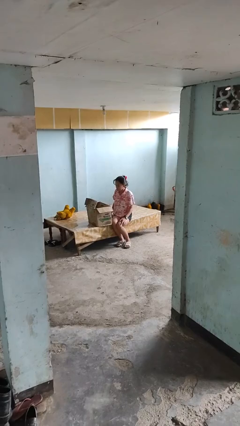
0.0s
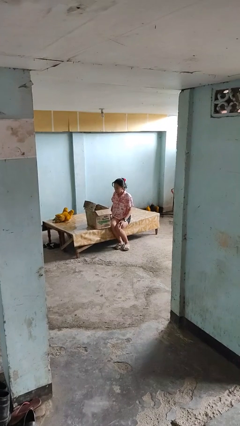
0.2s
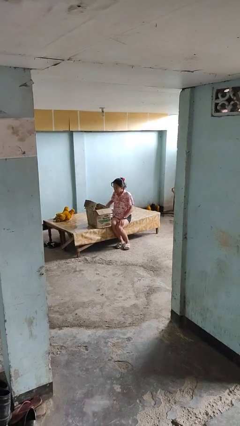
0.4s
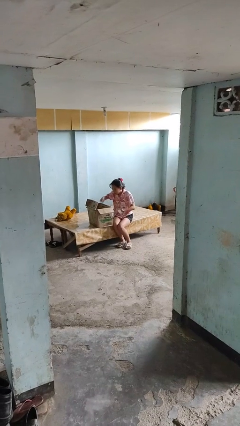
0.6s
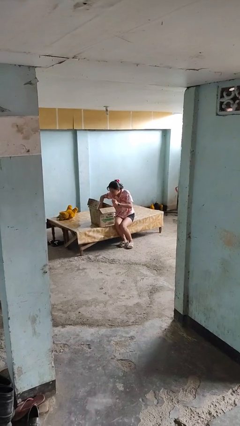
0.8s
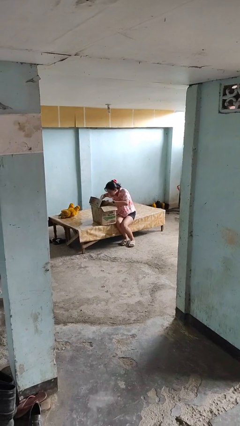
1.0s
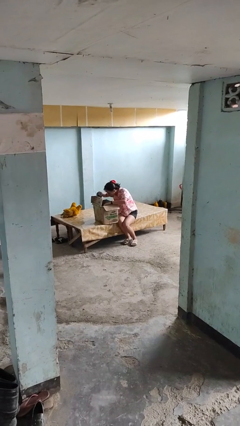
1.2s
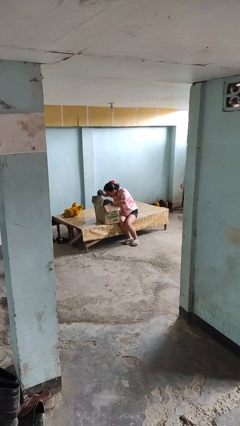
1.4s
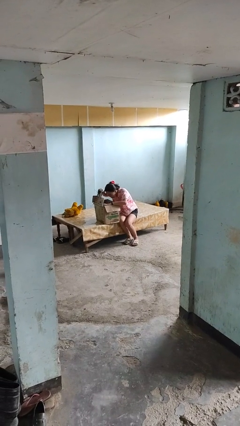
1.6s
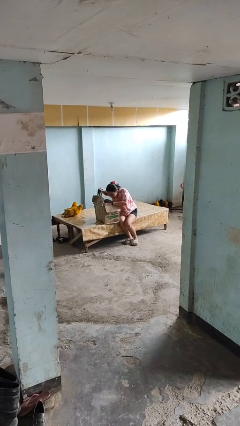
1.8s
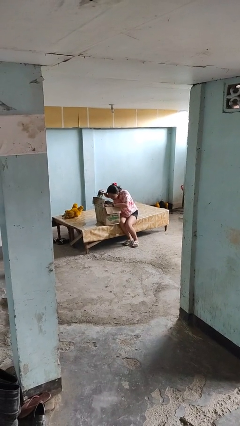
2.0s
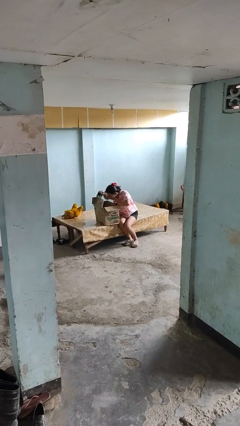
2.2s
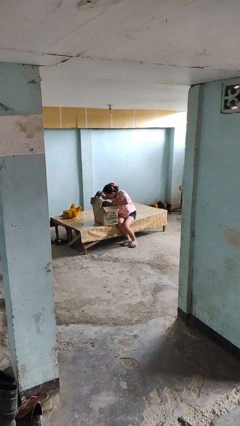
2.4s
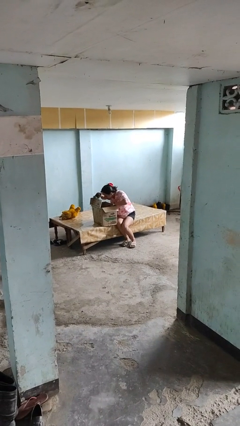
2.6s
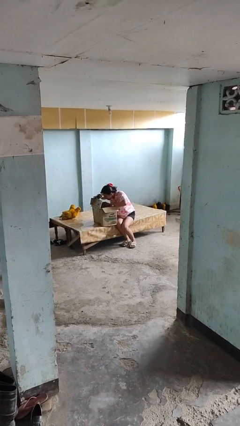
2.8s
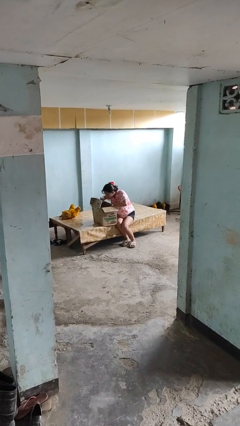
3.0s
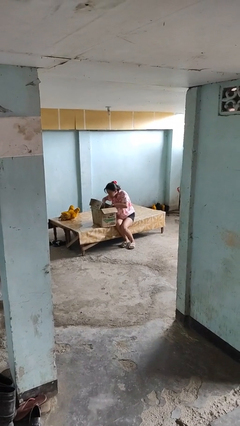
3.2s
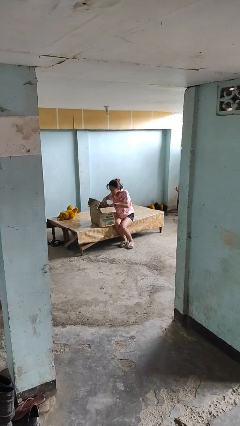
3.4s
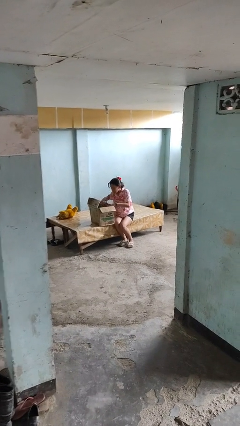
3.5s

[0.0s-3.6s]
person searches in box

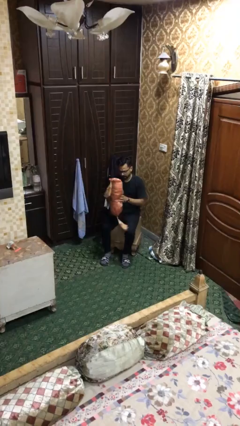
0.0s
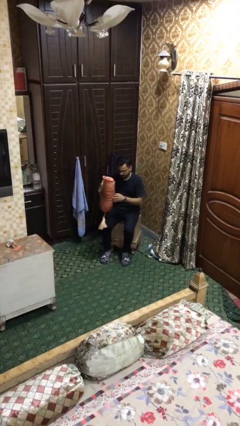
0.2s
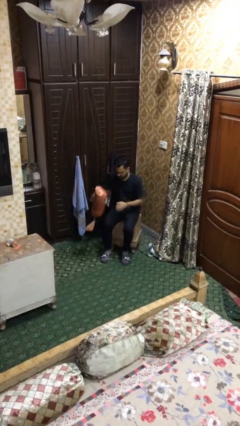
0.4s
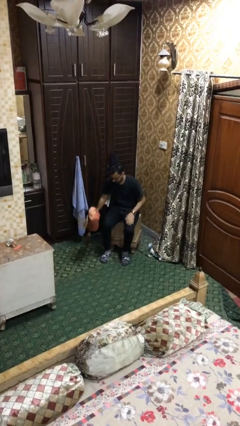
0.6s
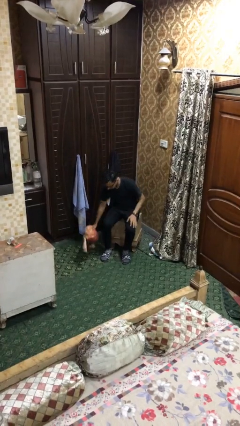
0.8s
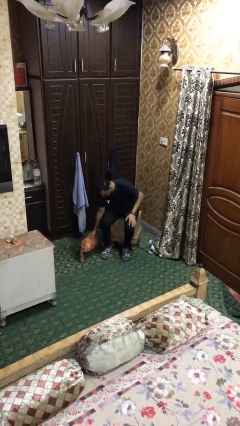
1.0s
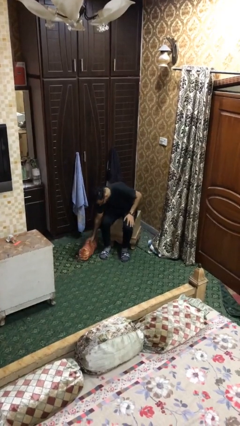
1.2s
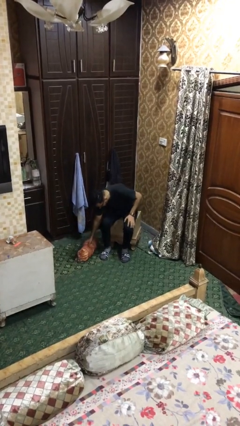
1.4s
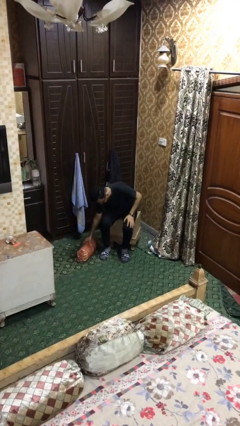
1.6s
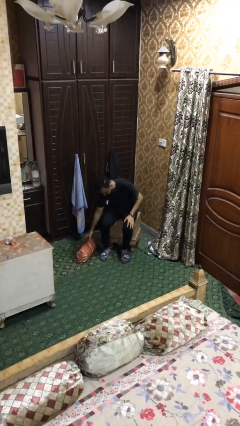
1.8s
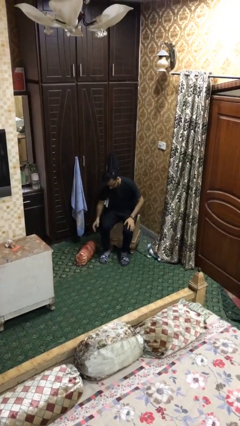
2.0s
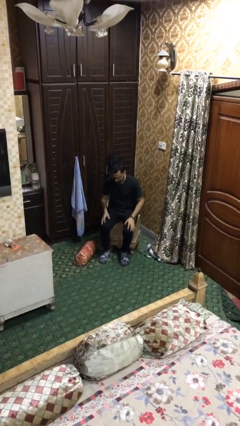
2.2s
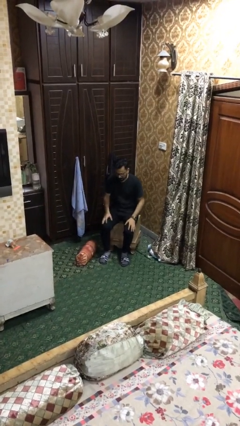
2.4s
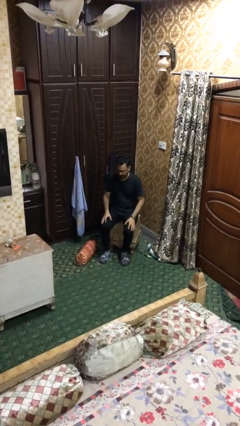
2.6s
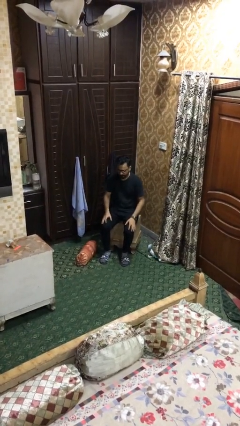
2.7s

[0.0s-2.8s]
person puts down object on floor

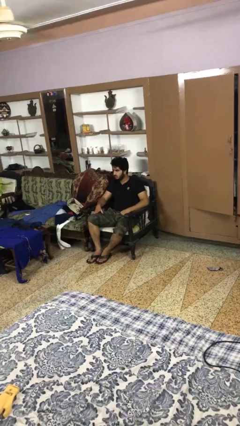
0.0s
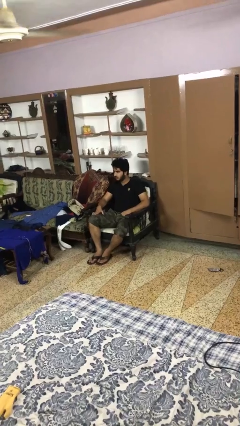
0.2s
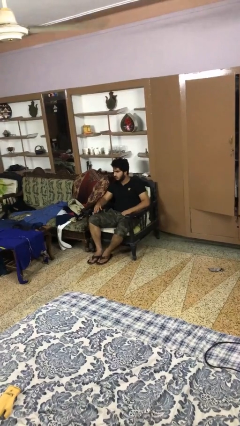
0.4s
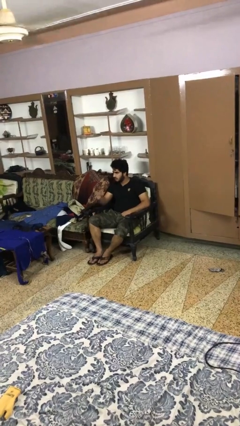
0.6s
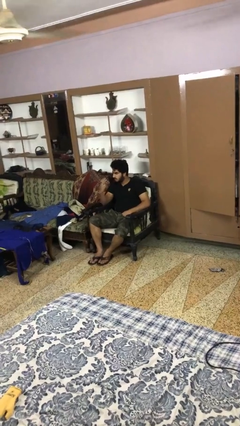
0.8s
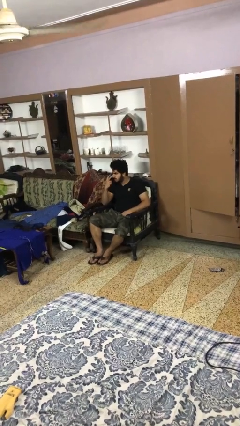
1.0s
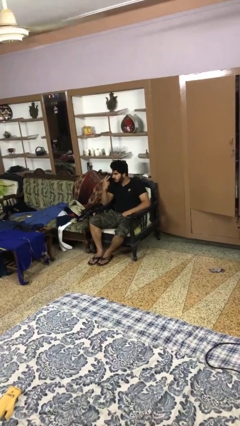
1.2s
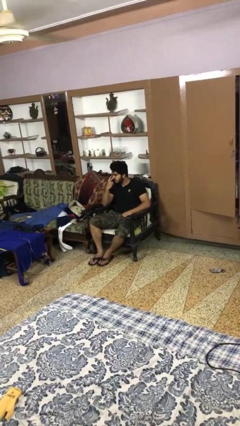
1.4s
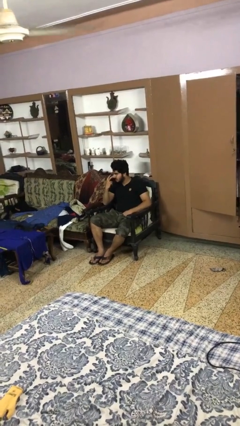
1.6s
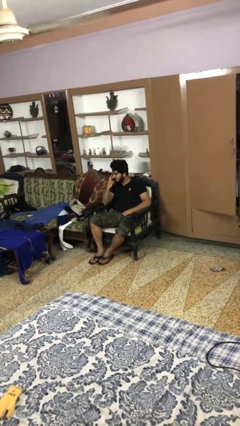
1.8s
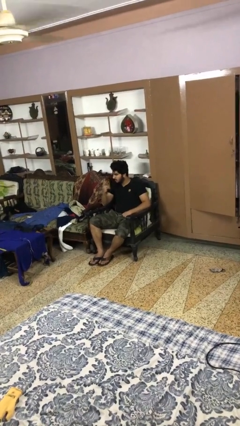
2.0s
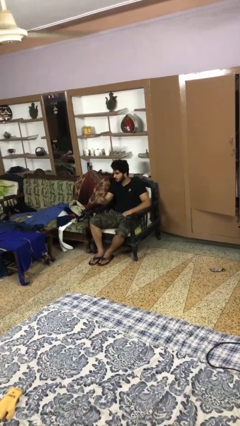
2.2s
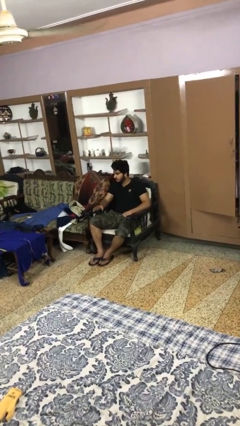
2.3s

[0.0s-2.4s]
person gestures watch closely

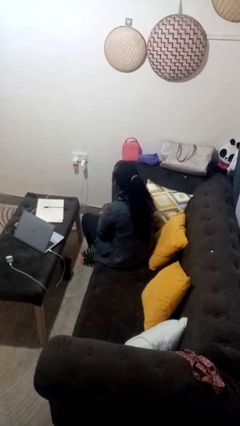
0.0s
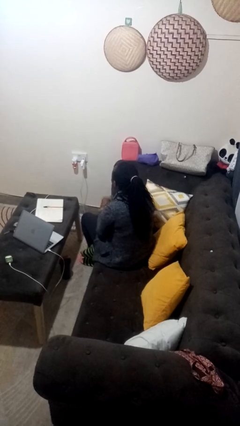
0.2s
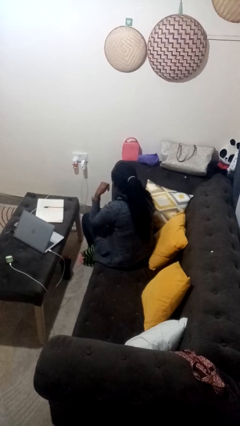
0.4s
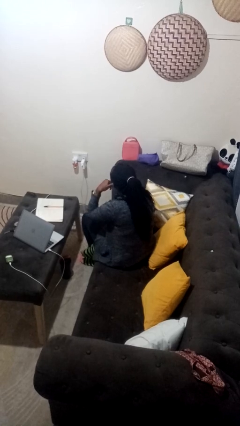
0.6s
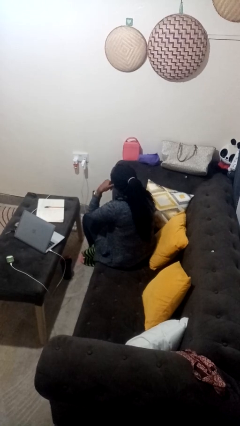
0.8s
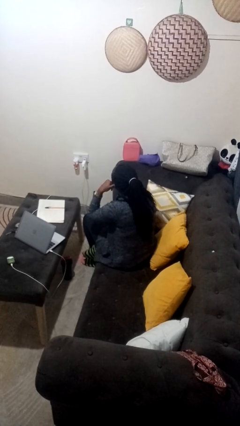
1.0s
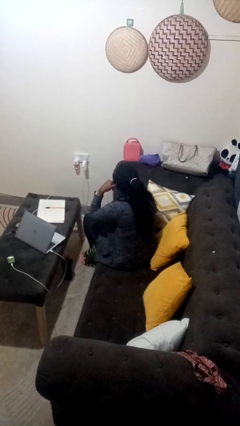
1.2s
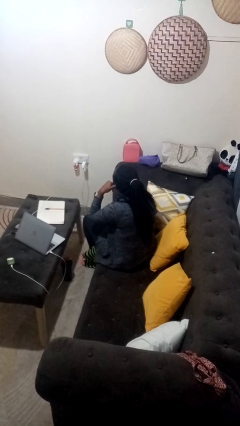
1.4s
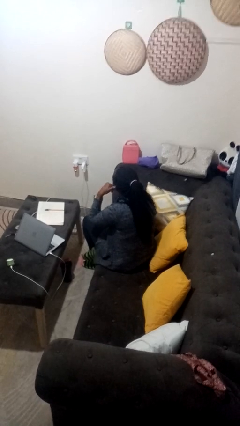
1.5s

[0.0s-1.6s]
person gestures call me

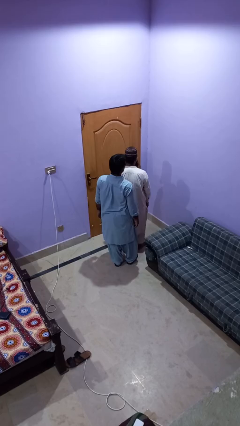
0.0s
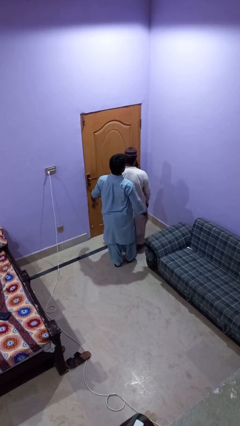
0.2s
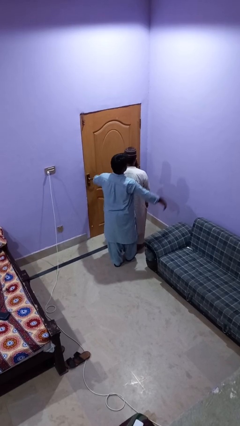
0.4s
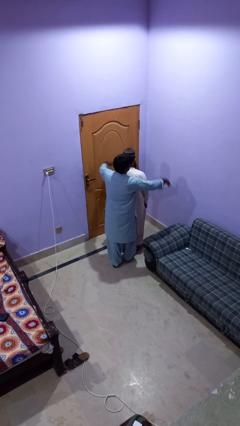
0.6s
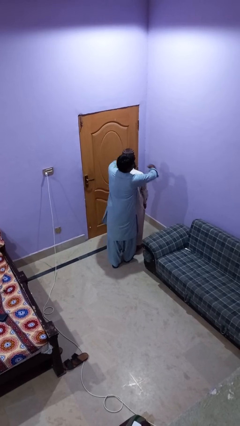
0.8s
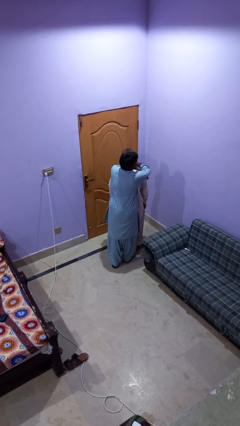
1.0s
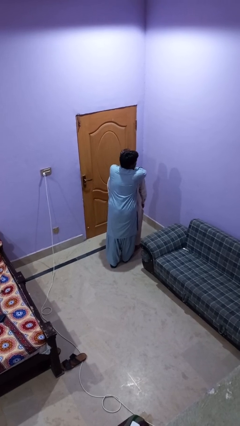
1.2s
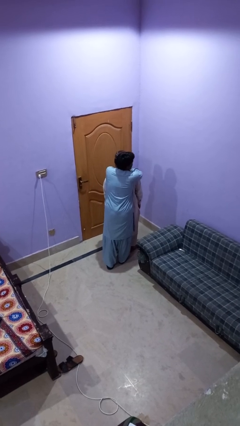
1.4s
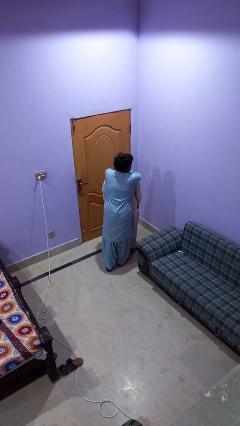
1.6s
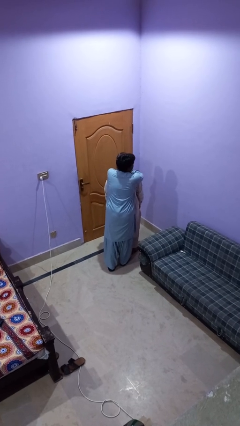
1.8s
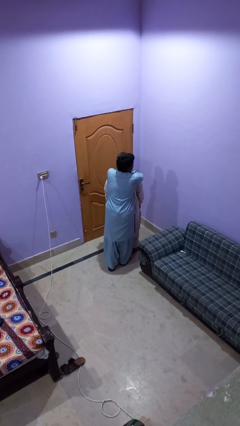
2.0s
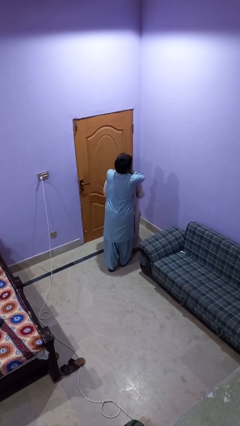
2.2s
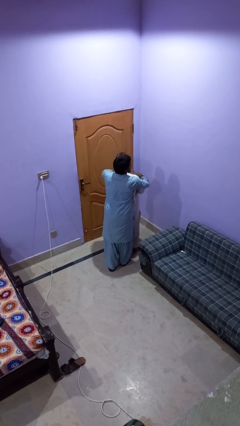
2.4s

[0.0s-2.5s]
person hugs person from behind

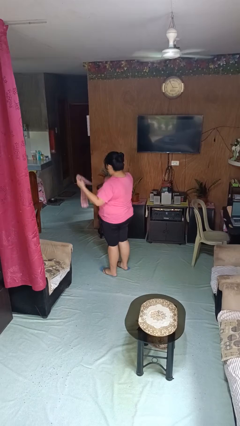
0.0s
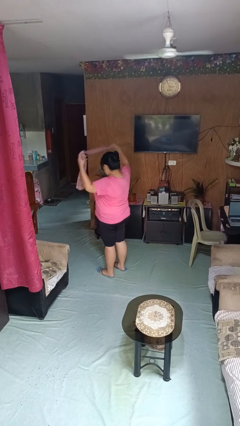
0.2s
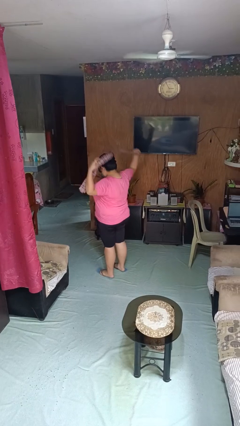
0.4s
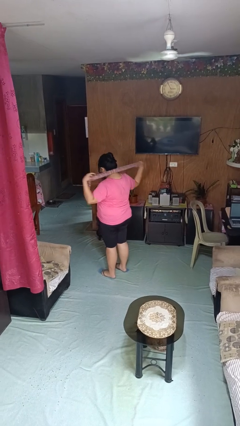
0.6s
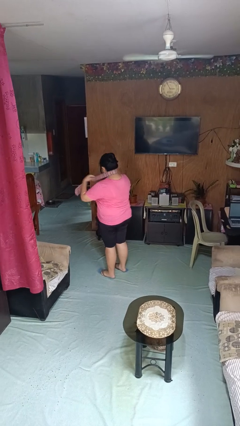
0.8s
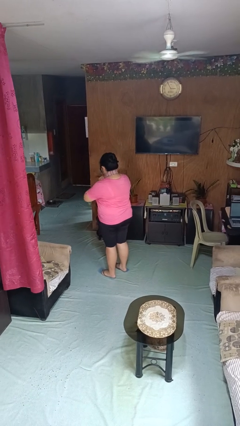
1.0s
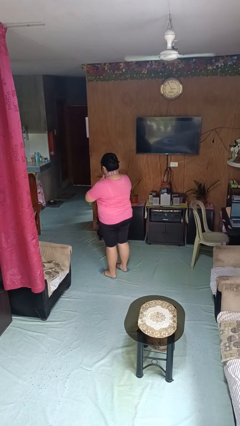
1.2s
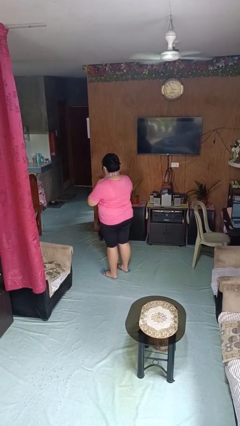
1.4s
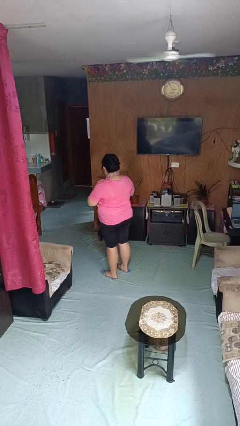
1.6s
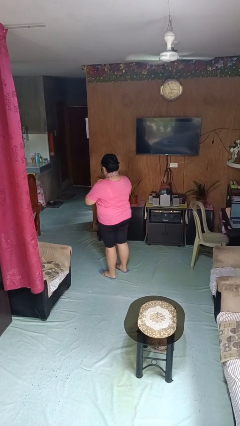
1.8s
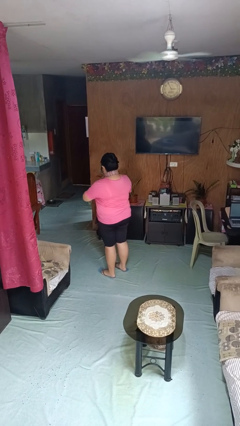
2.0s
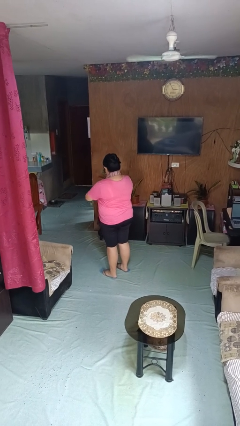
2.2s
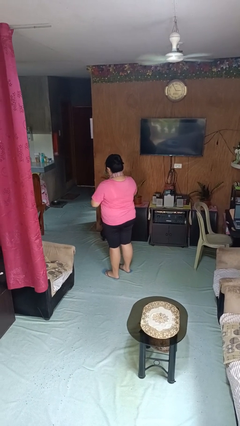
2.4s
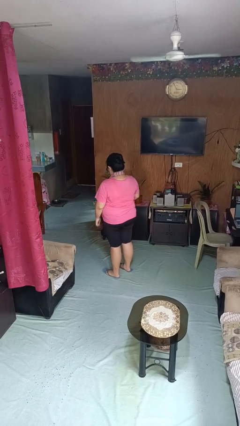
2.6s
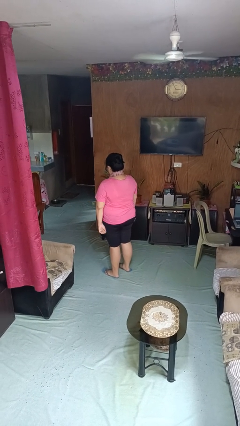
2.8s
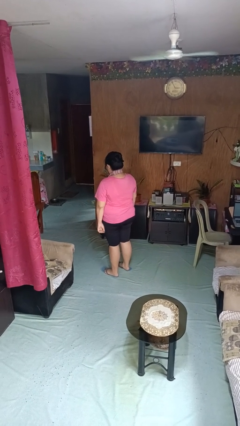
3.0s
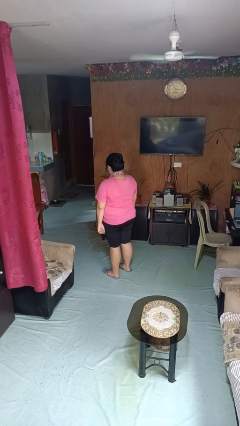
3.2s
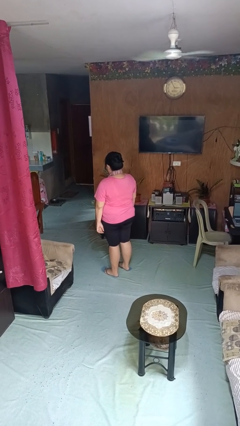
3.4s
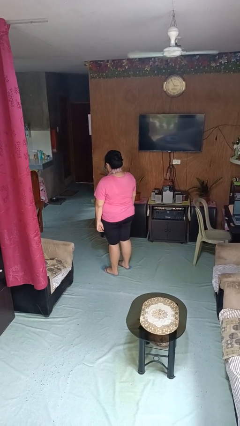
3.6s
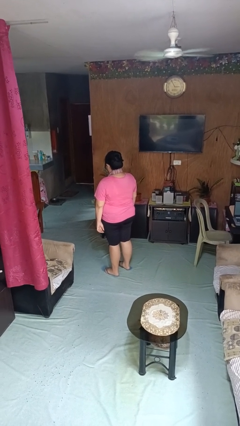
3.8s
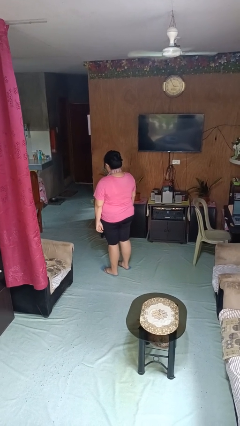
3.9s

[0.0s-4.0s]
person puts on necktie

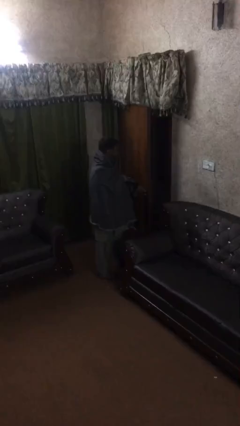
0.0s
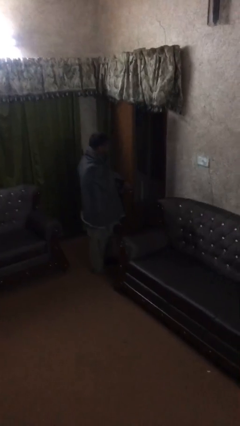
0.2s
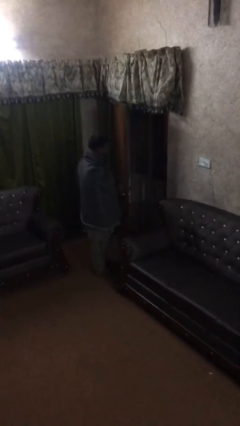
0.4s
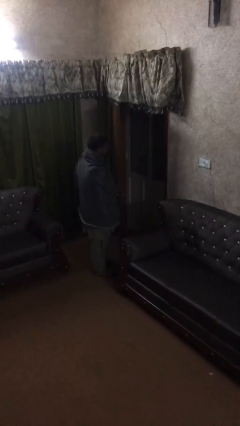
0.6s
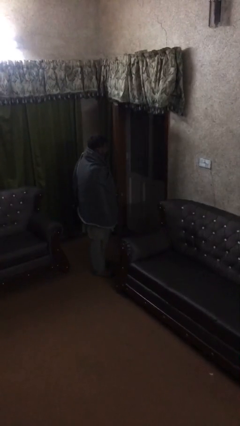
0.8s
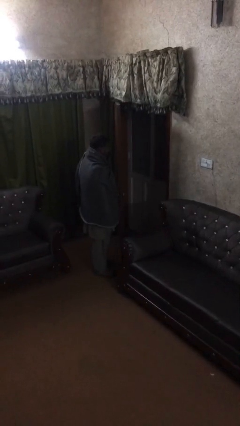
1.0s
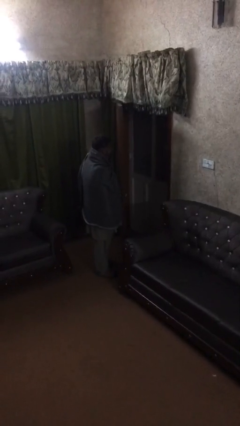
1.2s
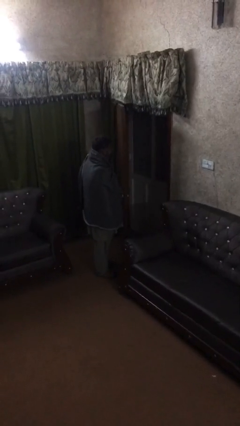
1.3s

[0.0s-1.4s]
person opens facility door
